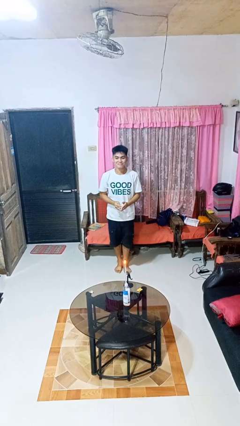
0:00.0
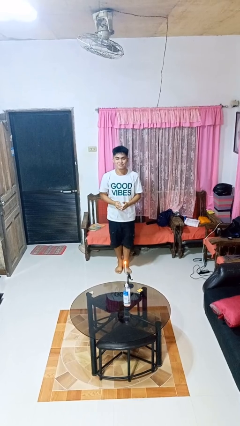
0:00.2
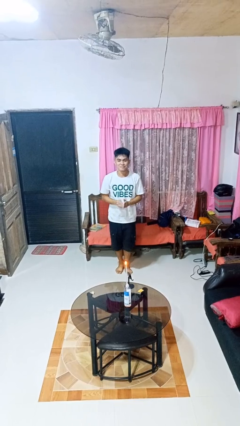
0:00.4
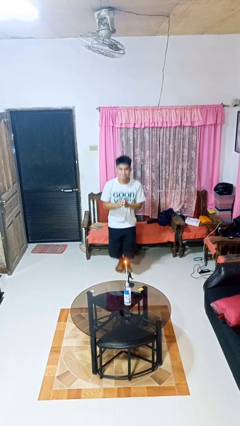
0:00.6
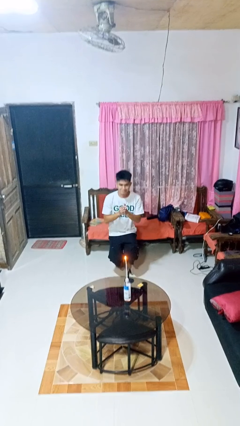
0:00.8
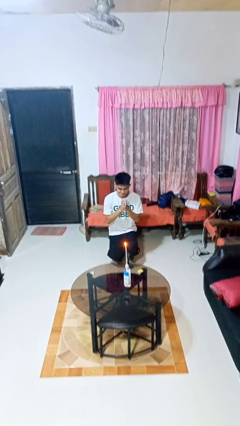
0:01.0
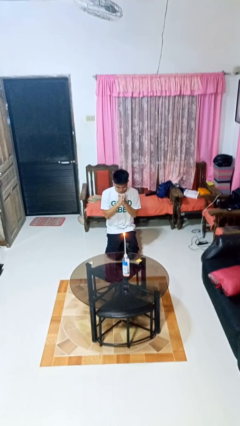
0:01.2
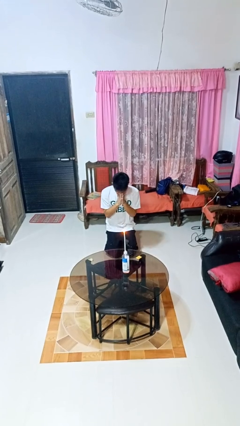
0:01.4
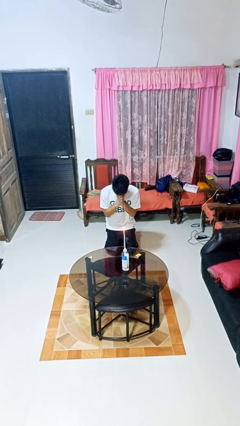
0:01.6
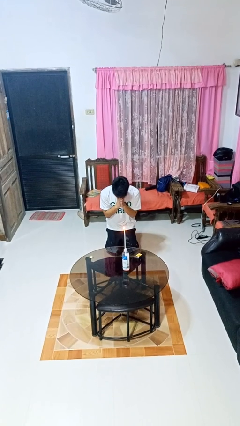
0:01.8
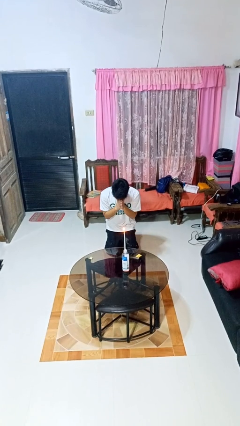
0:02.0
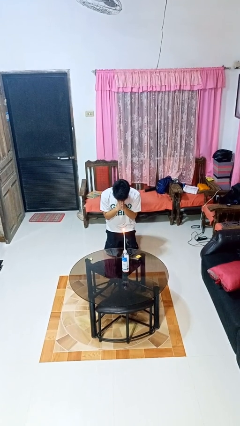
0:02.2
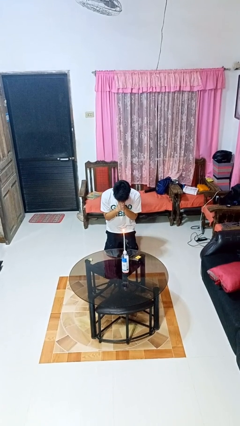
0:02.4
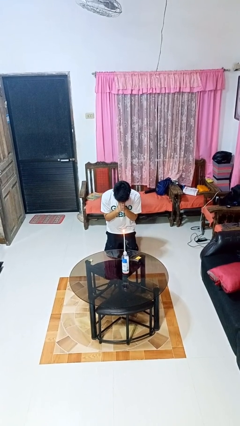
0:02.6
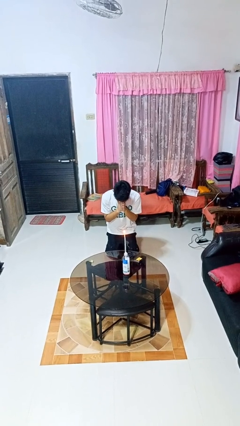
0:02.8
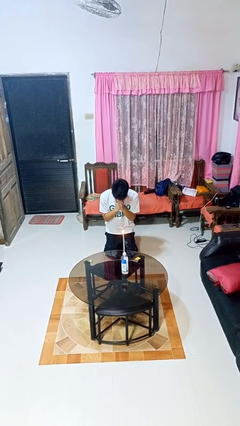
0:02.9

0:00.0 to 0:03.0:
person prays

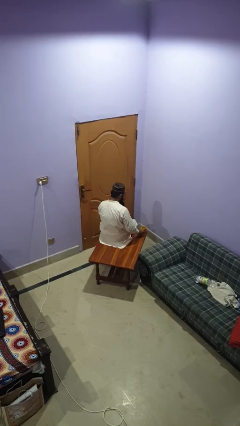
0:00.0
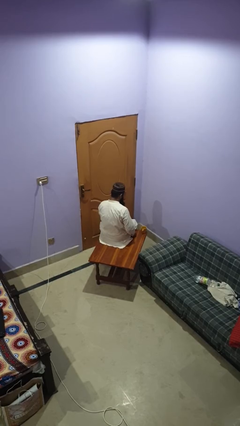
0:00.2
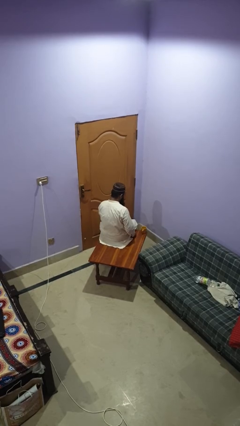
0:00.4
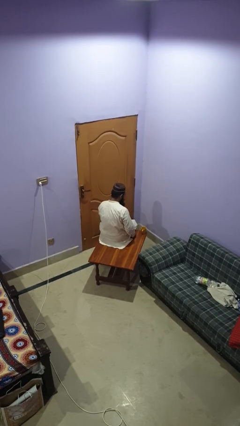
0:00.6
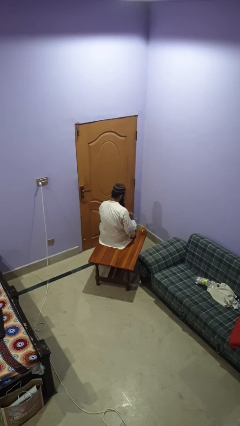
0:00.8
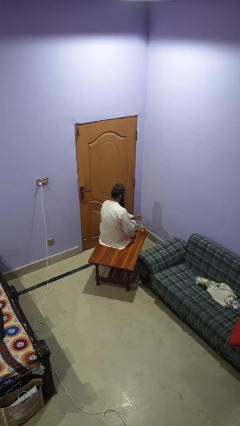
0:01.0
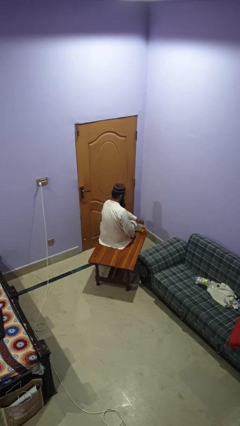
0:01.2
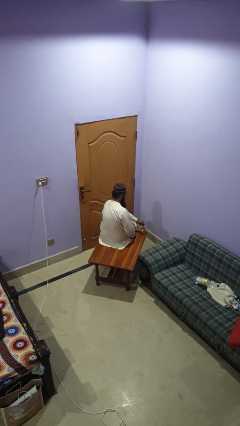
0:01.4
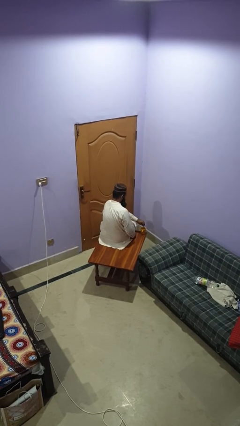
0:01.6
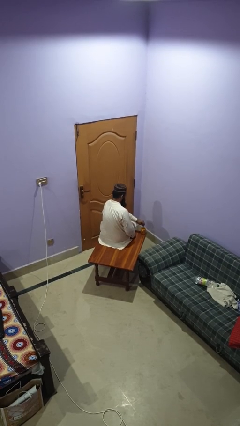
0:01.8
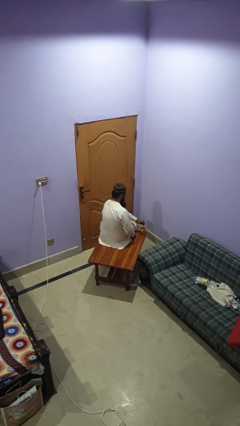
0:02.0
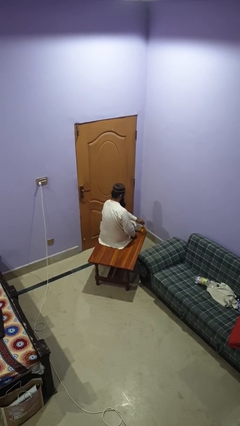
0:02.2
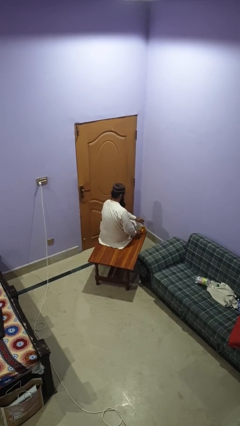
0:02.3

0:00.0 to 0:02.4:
person stirs mug

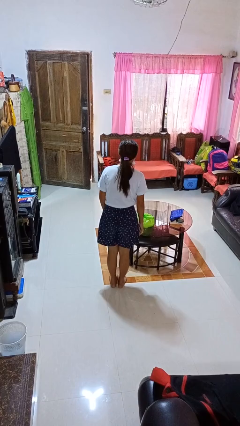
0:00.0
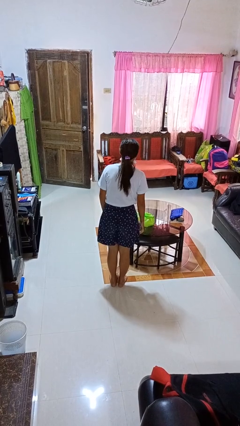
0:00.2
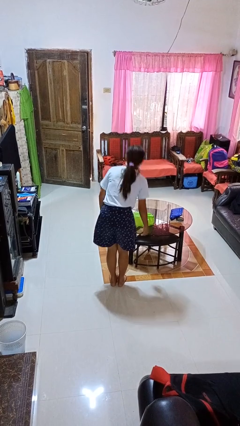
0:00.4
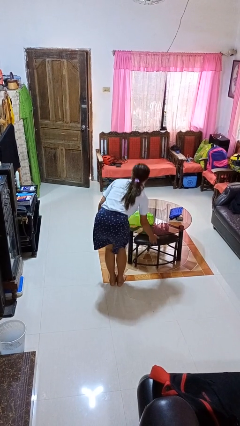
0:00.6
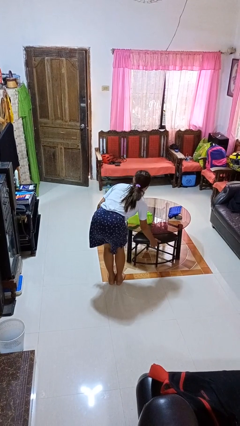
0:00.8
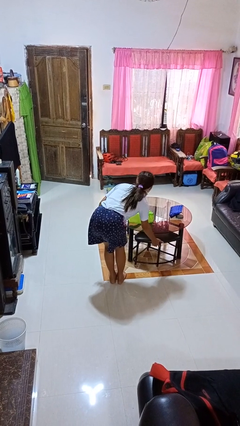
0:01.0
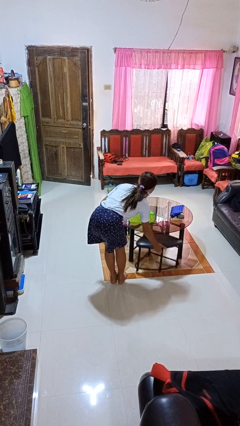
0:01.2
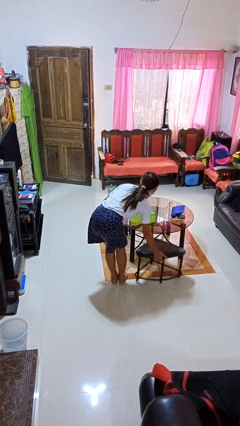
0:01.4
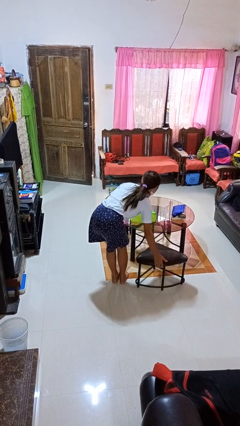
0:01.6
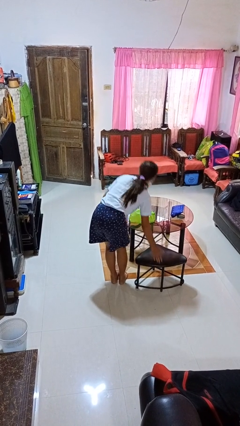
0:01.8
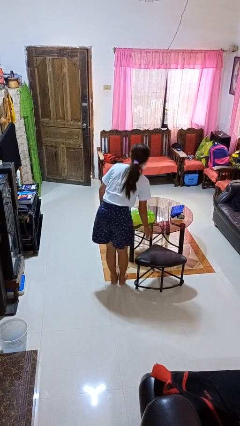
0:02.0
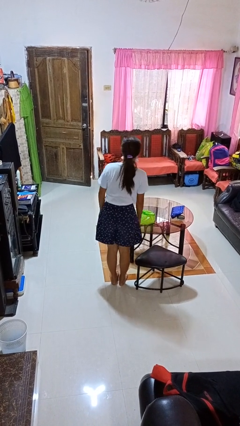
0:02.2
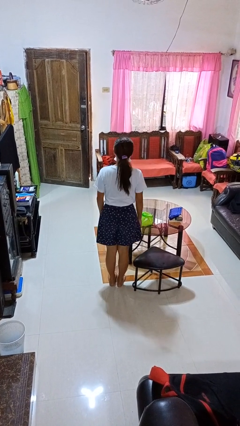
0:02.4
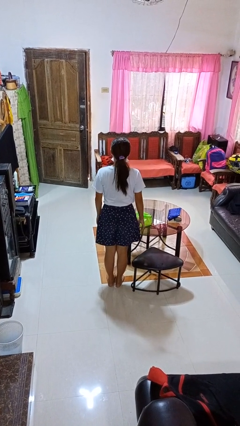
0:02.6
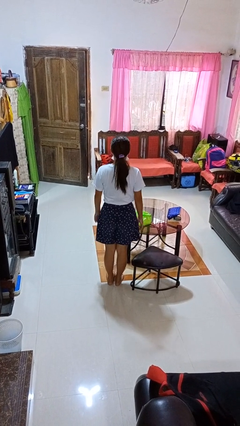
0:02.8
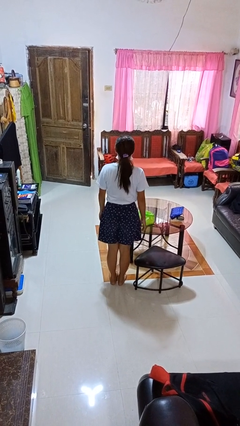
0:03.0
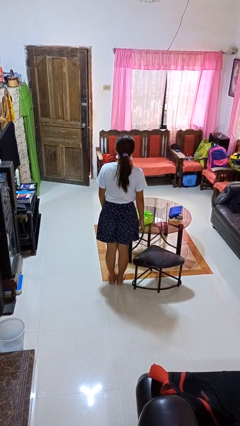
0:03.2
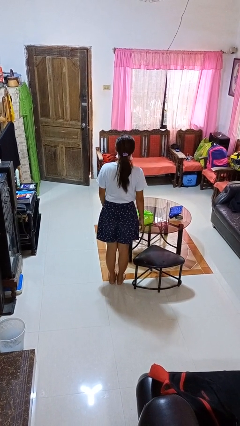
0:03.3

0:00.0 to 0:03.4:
person pulls out chair

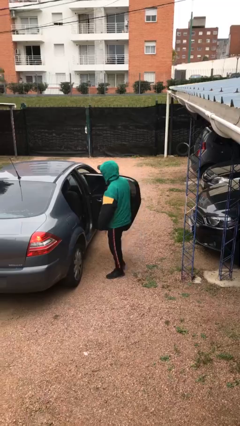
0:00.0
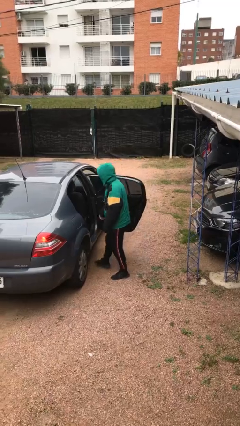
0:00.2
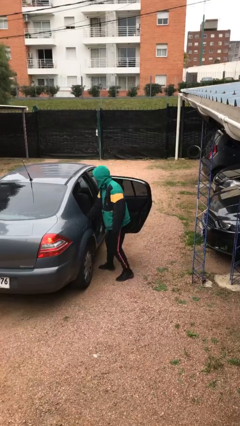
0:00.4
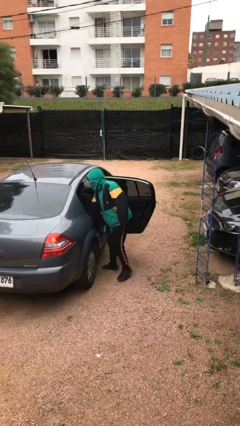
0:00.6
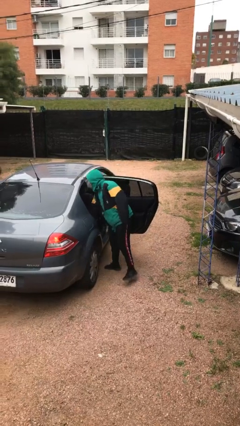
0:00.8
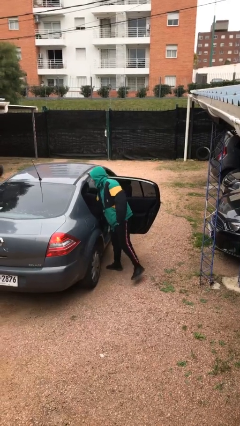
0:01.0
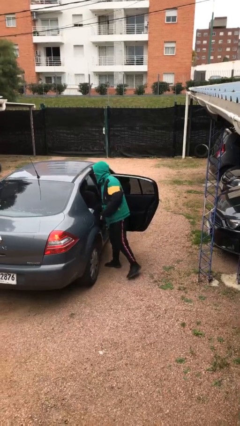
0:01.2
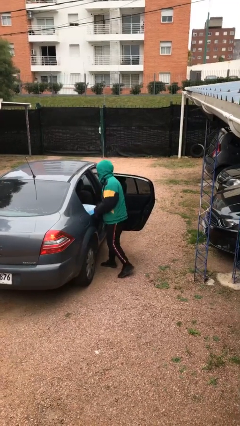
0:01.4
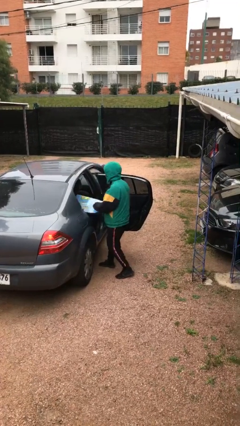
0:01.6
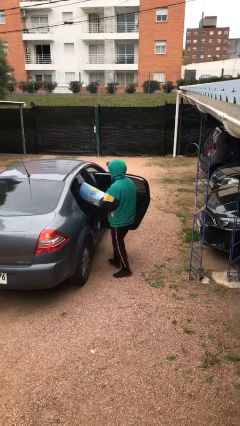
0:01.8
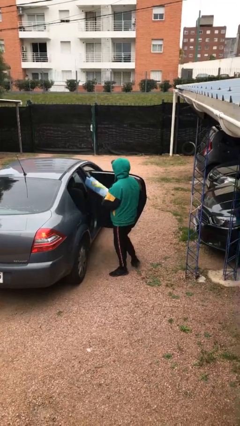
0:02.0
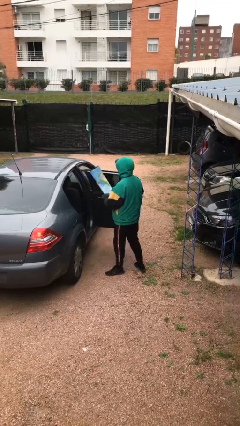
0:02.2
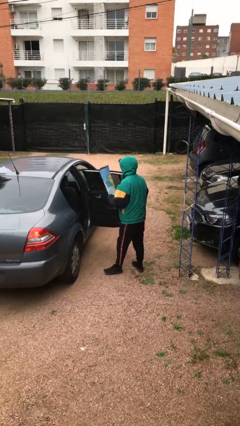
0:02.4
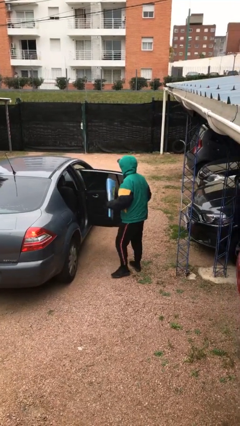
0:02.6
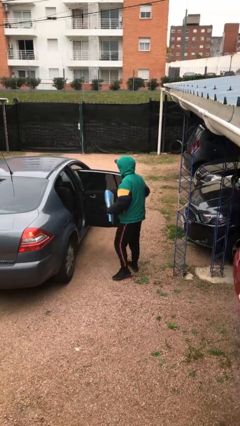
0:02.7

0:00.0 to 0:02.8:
person unloads car

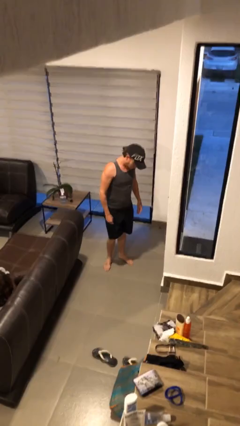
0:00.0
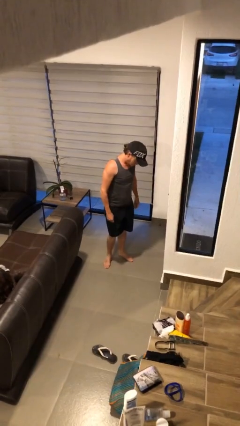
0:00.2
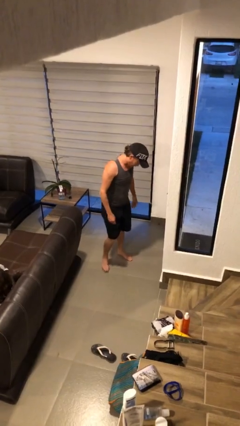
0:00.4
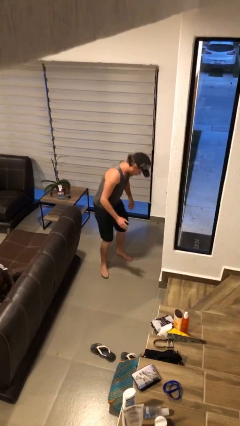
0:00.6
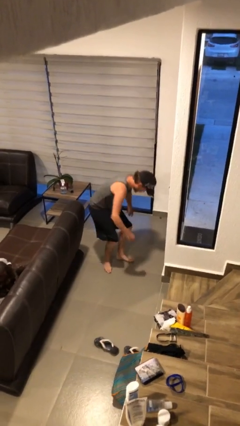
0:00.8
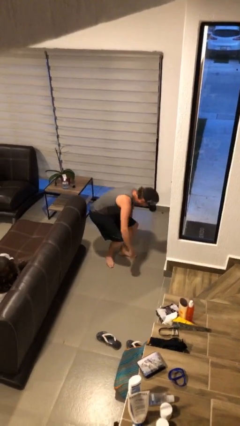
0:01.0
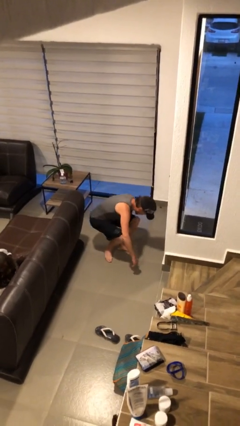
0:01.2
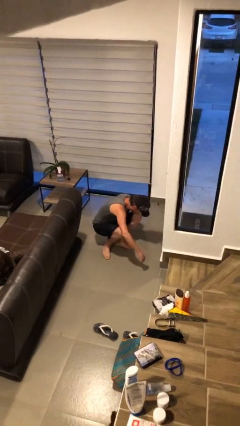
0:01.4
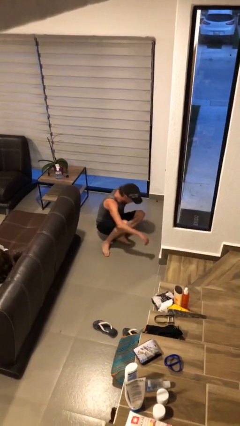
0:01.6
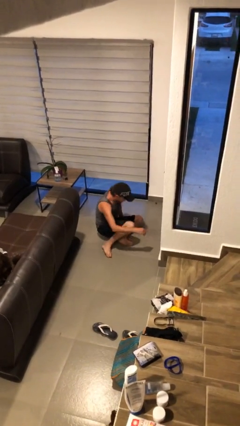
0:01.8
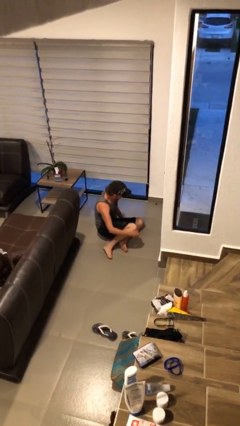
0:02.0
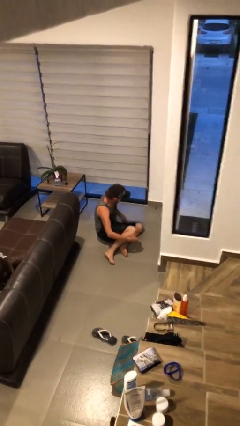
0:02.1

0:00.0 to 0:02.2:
person sits down

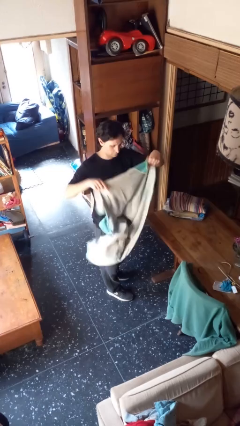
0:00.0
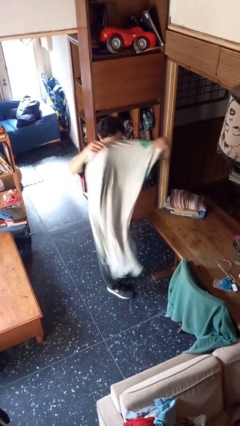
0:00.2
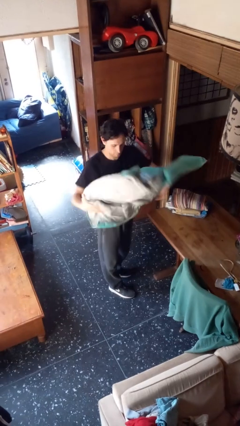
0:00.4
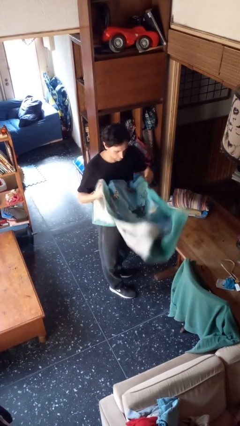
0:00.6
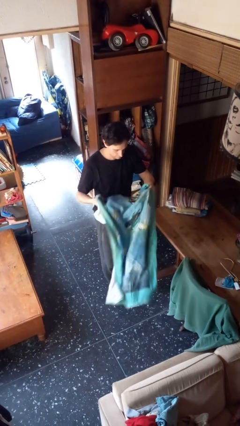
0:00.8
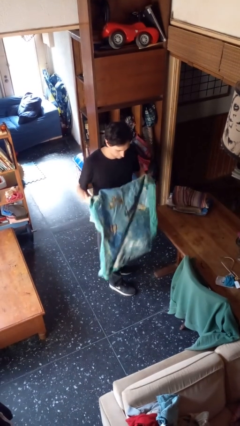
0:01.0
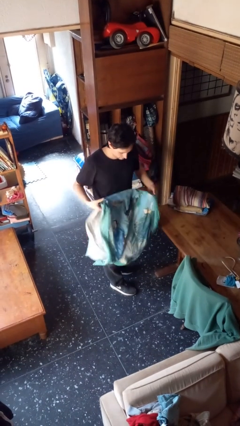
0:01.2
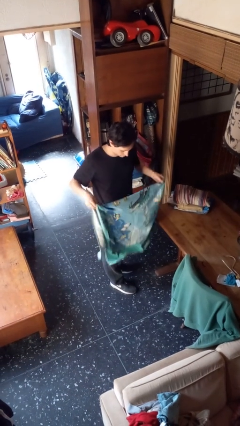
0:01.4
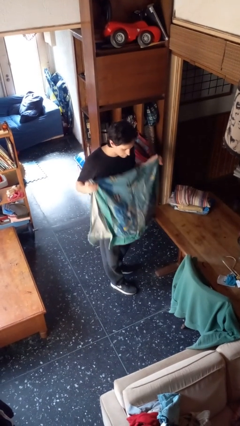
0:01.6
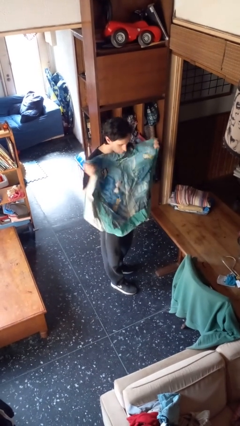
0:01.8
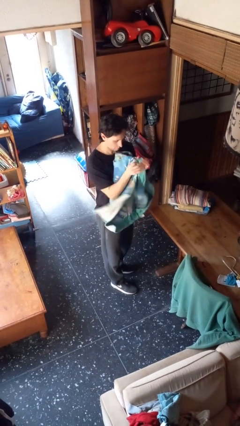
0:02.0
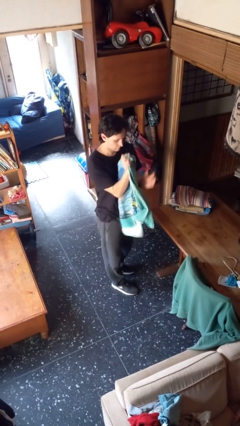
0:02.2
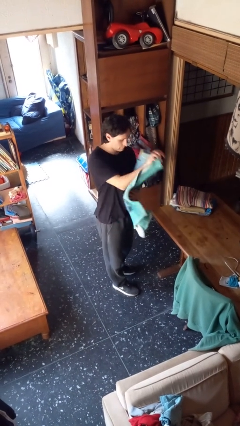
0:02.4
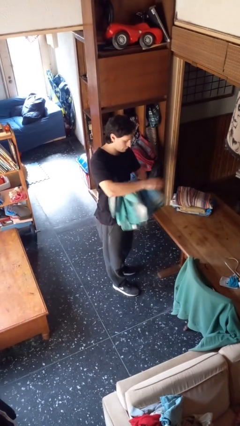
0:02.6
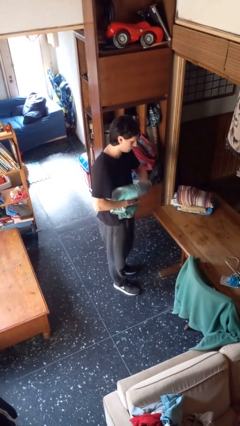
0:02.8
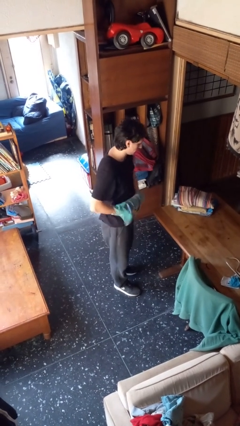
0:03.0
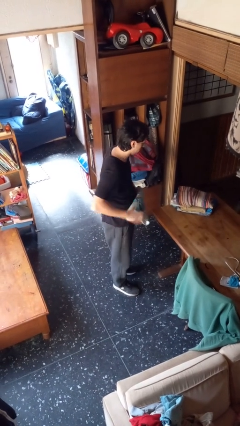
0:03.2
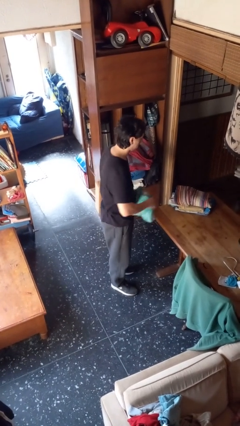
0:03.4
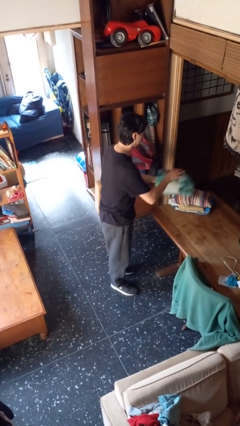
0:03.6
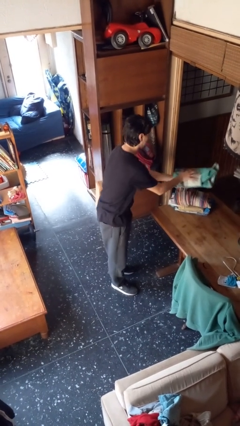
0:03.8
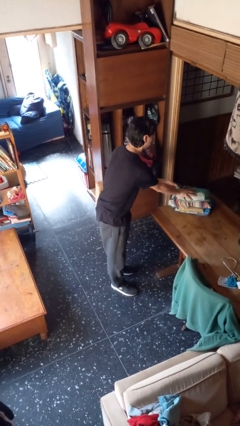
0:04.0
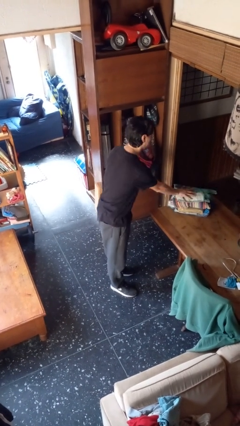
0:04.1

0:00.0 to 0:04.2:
person folds towel
